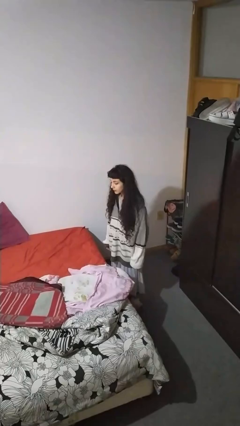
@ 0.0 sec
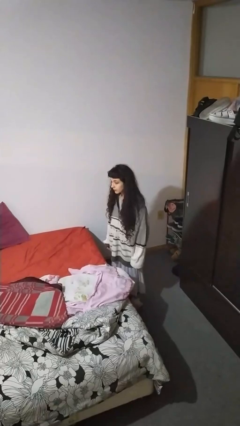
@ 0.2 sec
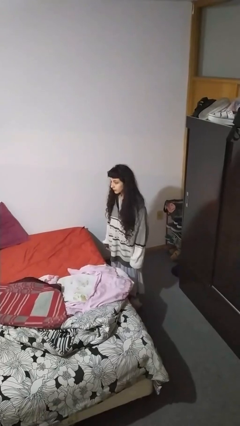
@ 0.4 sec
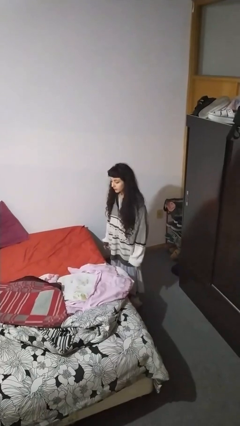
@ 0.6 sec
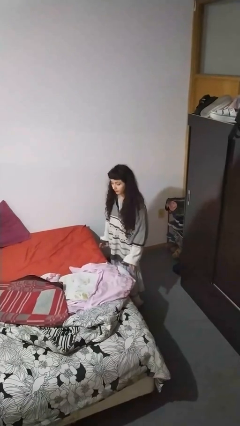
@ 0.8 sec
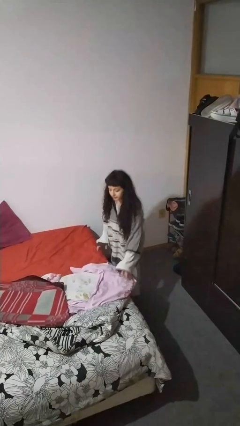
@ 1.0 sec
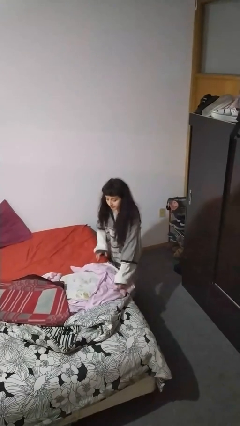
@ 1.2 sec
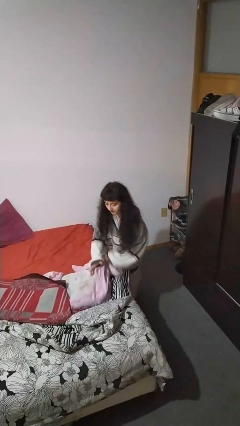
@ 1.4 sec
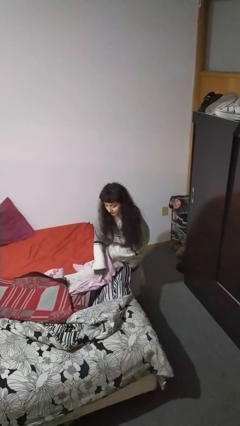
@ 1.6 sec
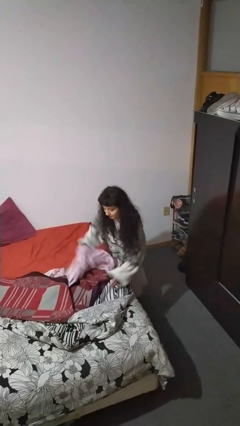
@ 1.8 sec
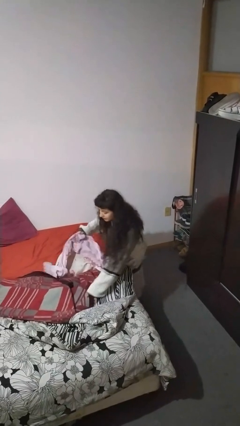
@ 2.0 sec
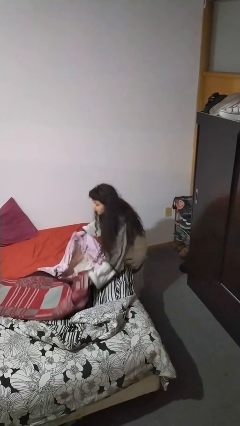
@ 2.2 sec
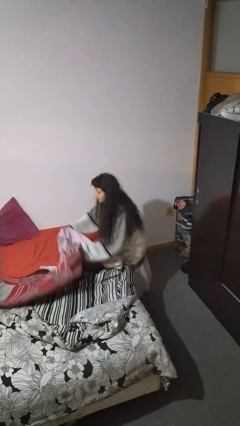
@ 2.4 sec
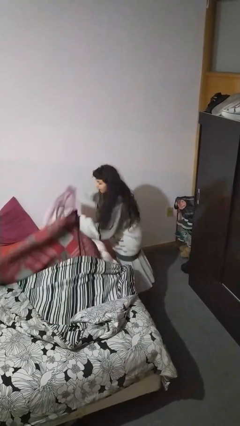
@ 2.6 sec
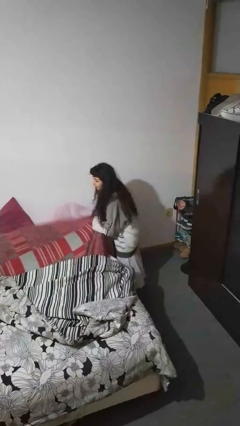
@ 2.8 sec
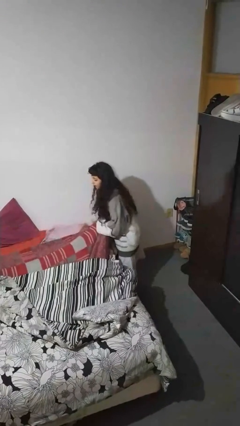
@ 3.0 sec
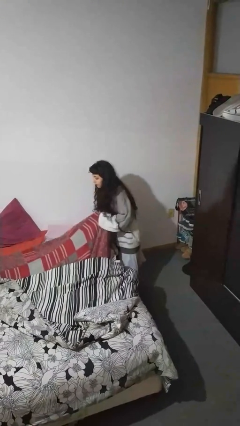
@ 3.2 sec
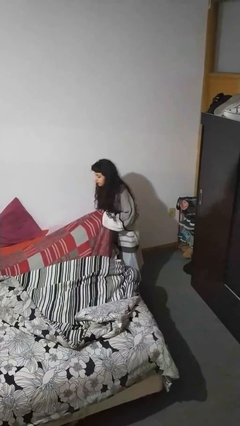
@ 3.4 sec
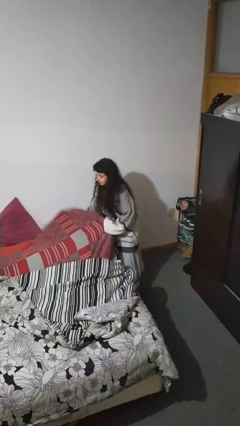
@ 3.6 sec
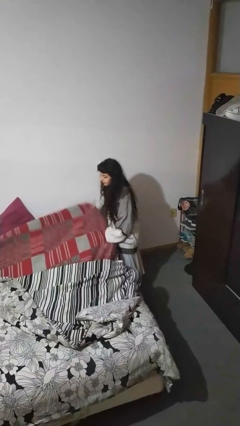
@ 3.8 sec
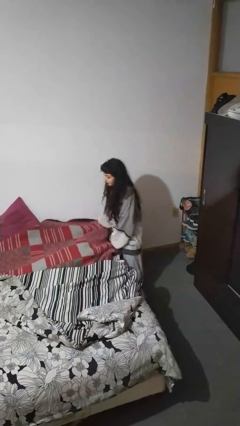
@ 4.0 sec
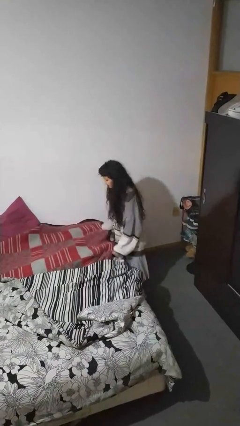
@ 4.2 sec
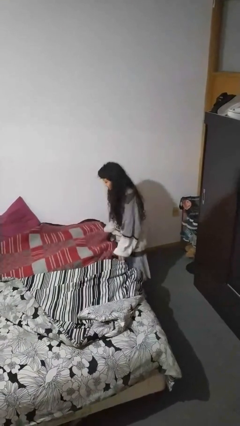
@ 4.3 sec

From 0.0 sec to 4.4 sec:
person makes bed

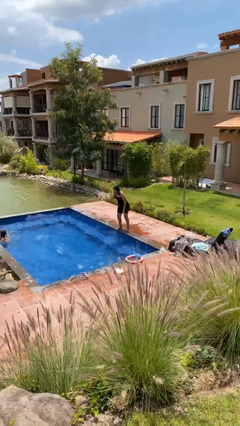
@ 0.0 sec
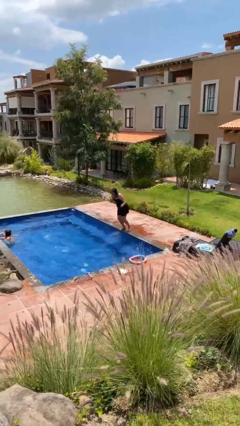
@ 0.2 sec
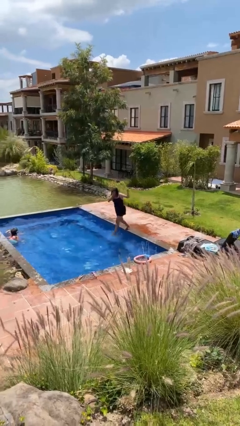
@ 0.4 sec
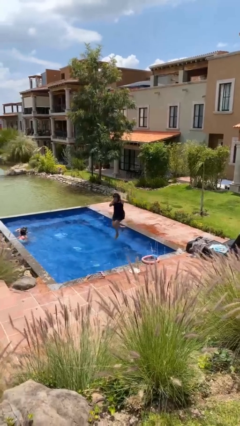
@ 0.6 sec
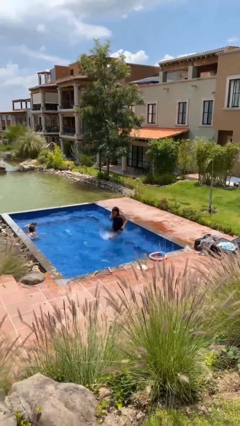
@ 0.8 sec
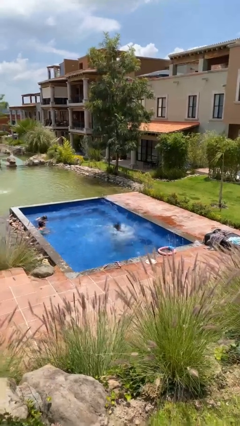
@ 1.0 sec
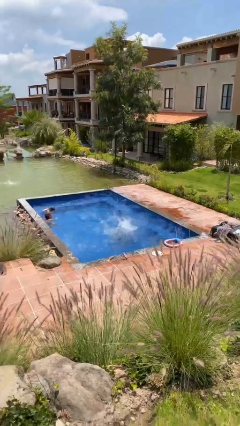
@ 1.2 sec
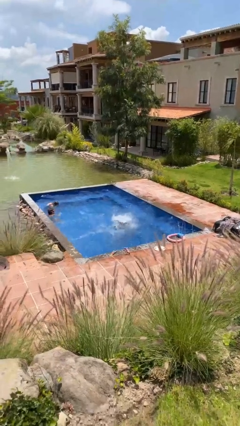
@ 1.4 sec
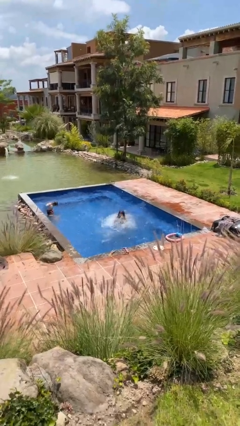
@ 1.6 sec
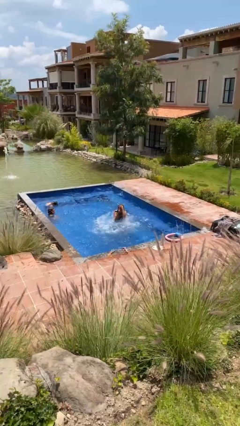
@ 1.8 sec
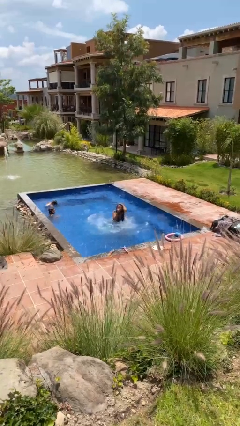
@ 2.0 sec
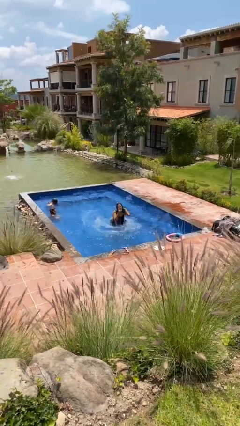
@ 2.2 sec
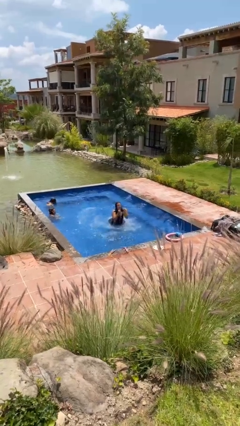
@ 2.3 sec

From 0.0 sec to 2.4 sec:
person jumps into pool

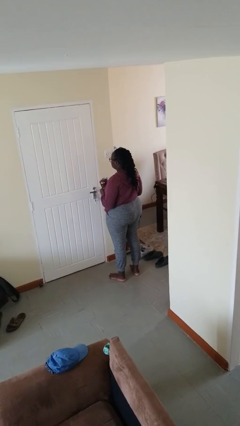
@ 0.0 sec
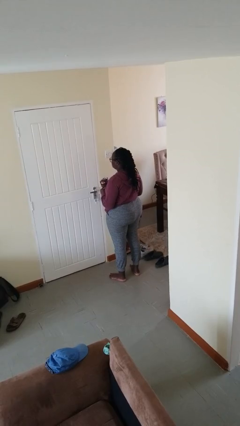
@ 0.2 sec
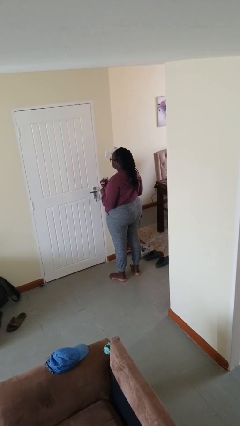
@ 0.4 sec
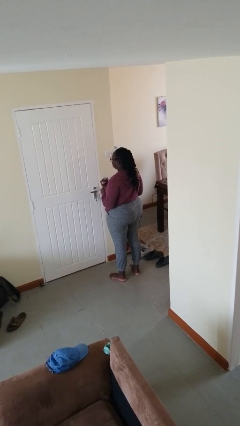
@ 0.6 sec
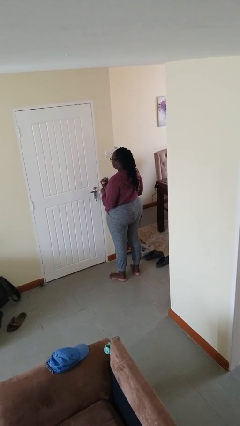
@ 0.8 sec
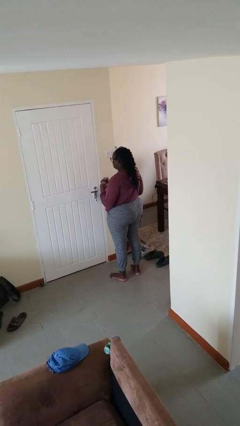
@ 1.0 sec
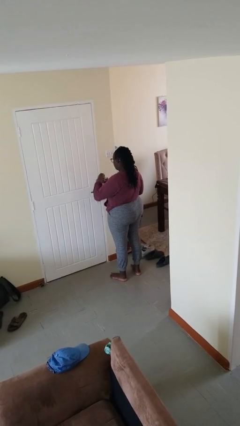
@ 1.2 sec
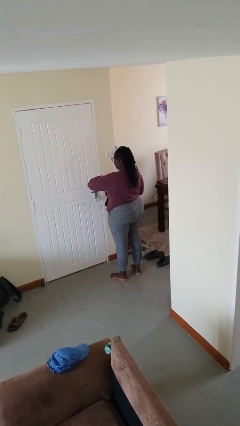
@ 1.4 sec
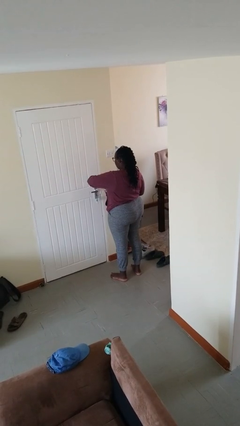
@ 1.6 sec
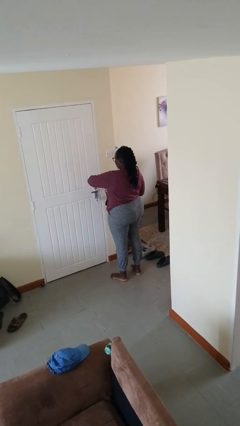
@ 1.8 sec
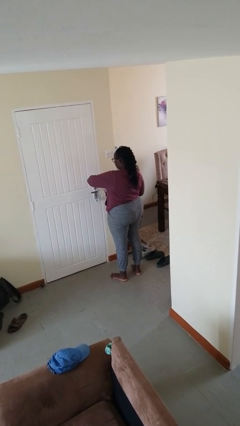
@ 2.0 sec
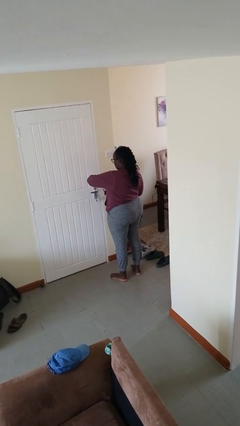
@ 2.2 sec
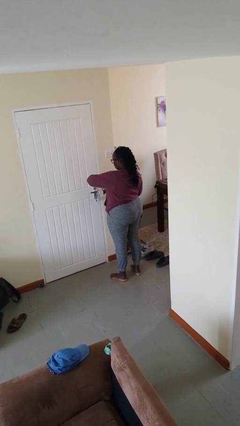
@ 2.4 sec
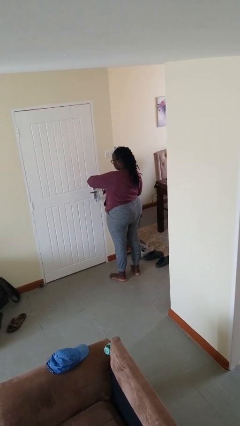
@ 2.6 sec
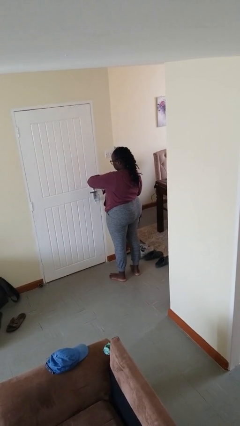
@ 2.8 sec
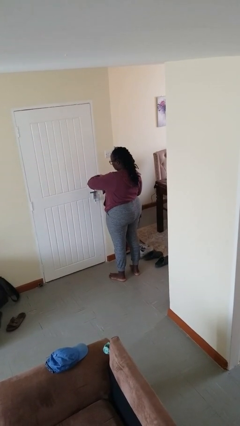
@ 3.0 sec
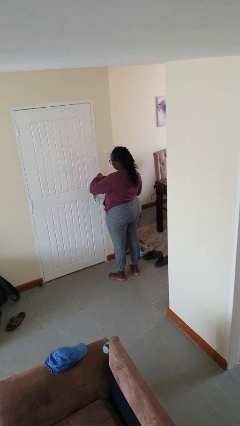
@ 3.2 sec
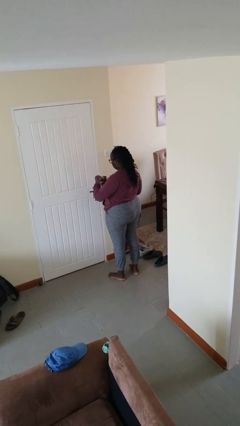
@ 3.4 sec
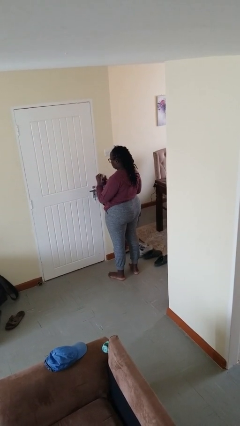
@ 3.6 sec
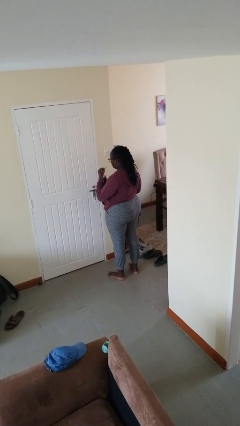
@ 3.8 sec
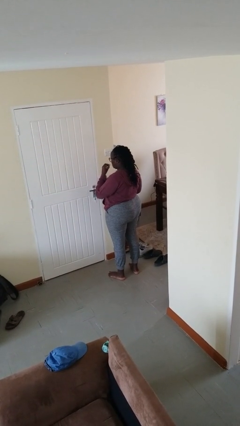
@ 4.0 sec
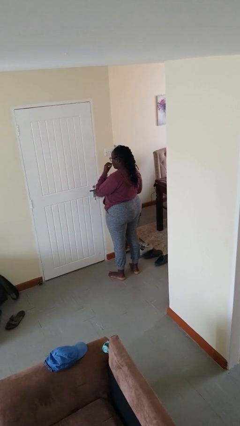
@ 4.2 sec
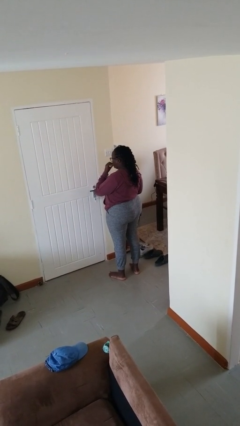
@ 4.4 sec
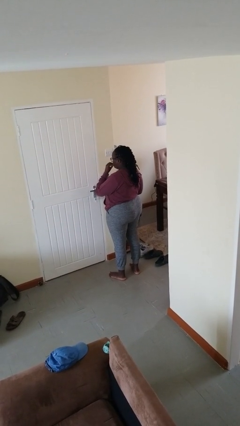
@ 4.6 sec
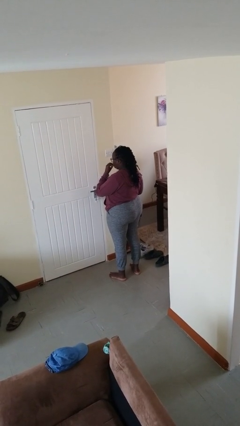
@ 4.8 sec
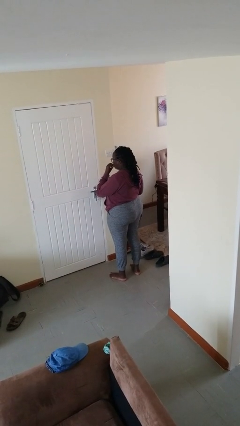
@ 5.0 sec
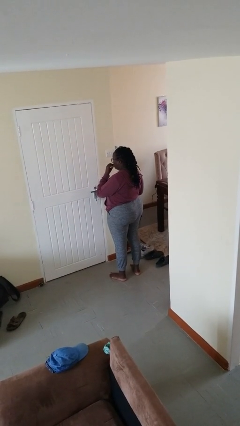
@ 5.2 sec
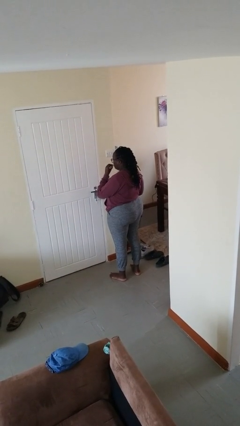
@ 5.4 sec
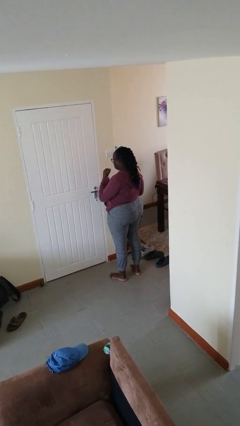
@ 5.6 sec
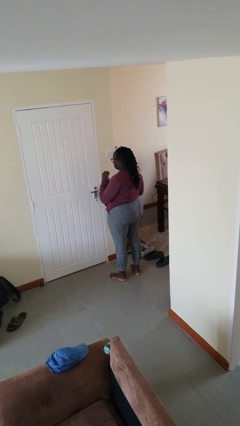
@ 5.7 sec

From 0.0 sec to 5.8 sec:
person eats snack from bag

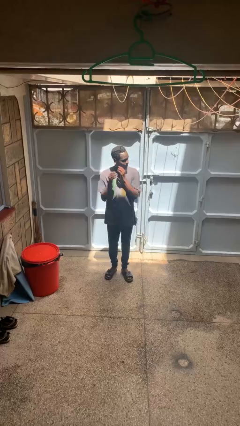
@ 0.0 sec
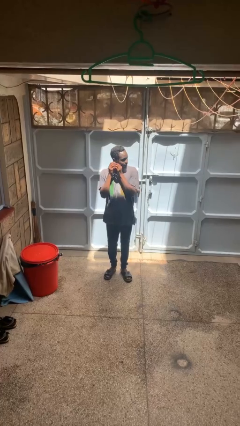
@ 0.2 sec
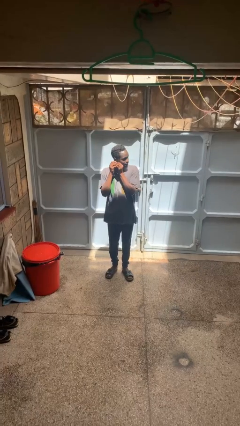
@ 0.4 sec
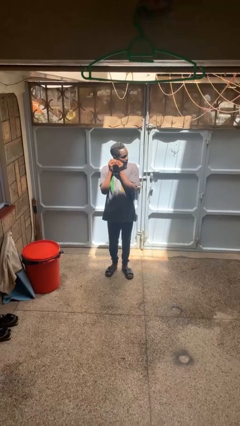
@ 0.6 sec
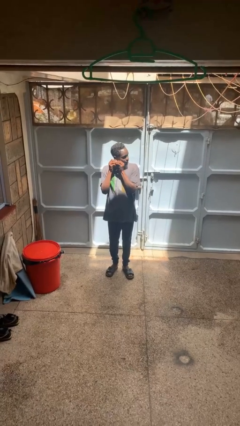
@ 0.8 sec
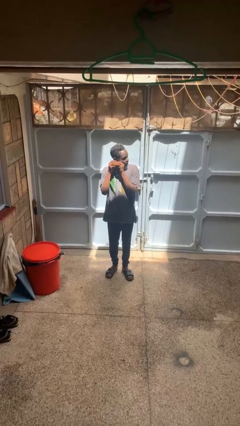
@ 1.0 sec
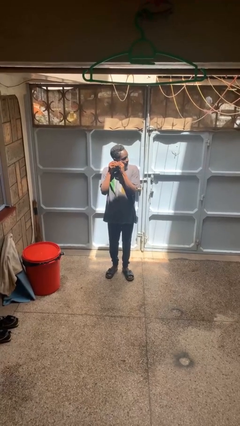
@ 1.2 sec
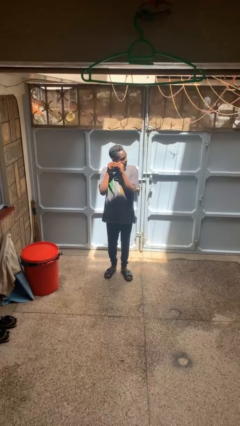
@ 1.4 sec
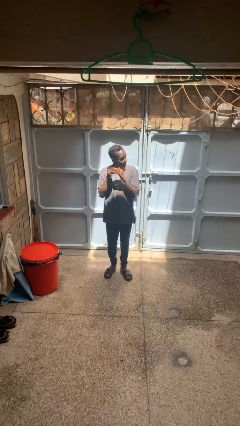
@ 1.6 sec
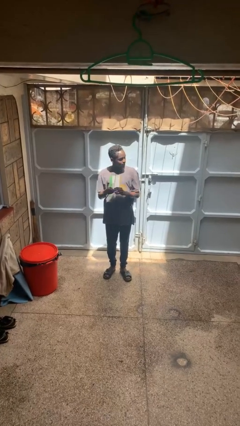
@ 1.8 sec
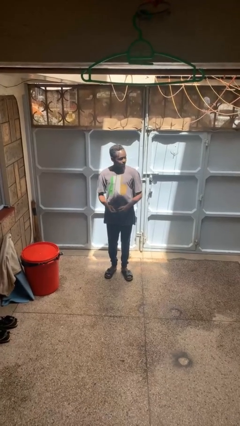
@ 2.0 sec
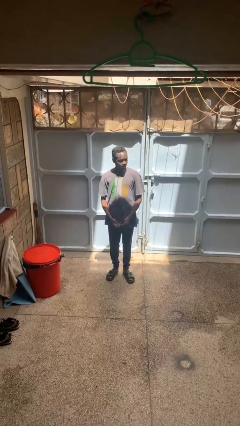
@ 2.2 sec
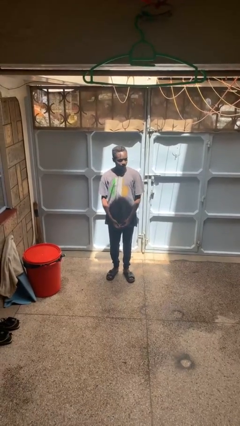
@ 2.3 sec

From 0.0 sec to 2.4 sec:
person takes off earrings

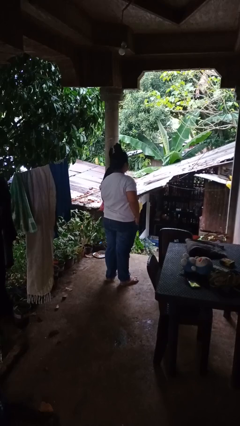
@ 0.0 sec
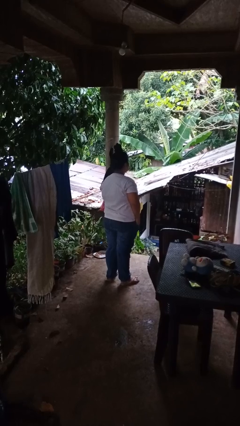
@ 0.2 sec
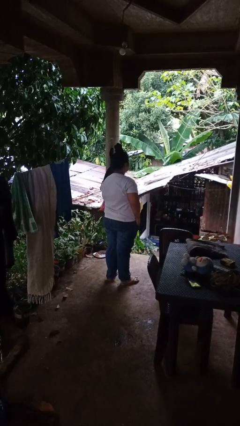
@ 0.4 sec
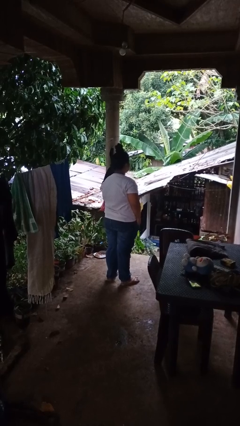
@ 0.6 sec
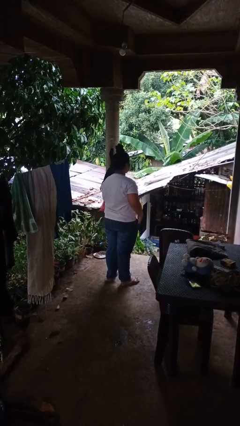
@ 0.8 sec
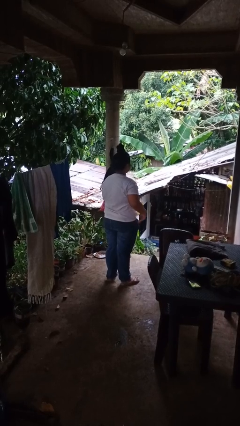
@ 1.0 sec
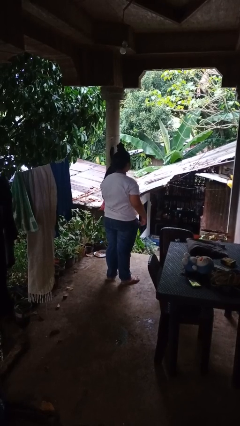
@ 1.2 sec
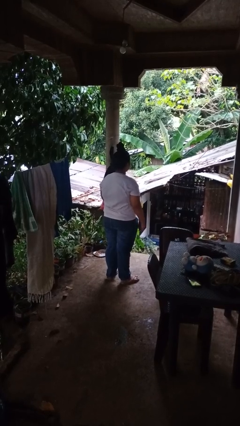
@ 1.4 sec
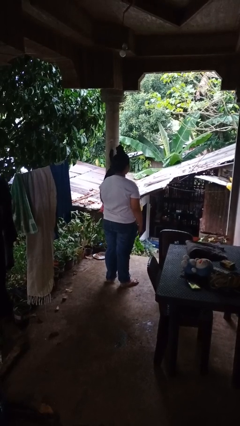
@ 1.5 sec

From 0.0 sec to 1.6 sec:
person puts hands in back pockets

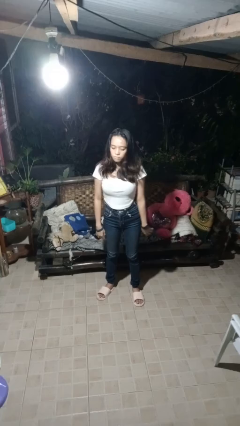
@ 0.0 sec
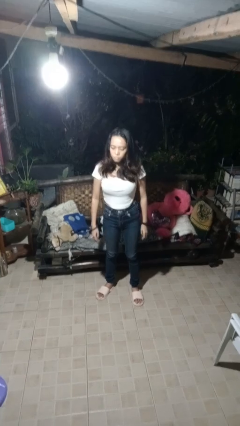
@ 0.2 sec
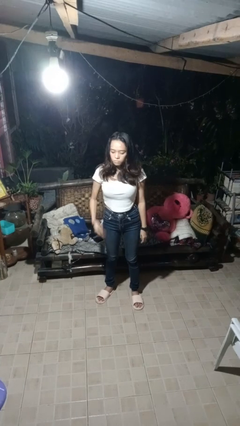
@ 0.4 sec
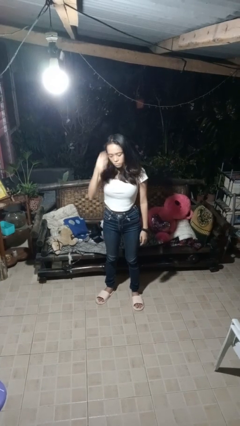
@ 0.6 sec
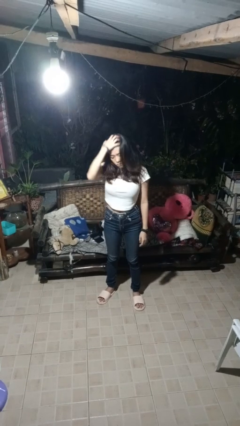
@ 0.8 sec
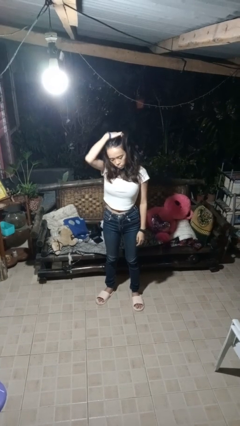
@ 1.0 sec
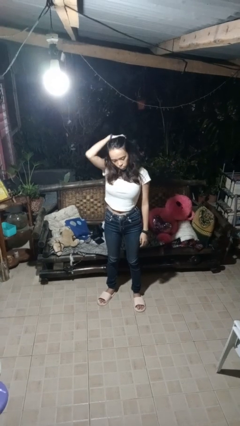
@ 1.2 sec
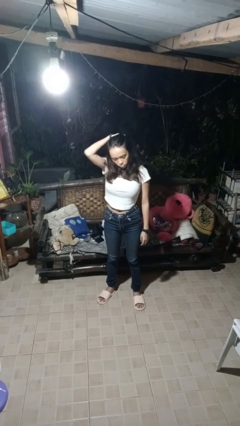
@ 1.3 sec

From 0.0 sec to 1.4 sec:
person strokes hair
